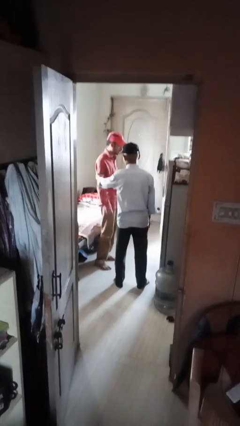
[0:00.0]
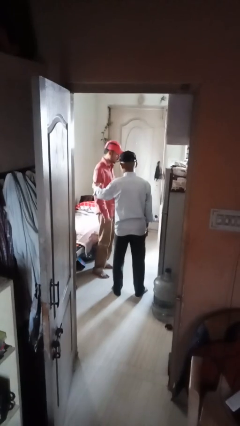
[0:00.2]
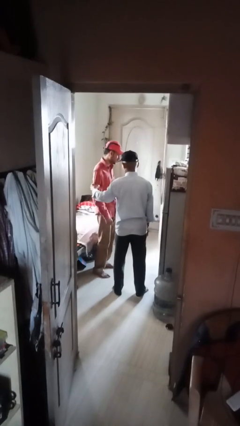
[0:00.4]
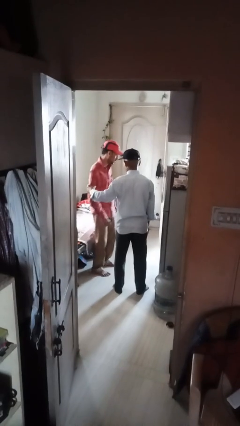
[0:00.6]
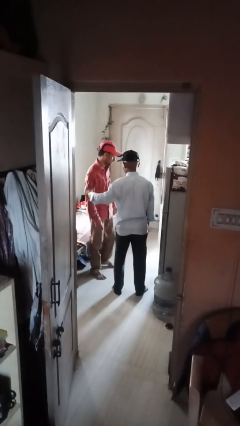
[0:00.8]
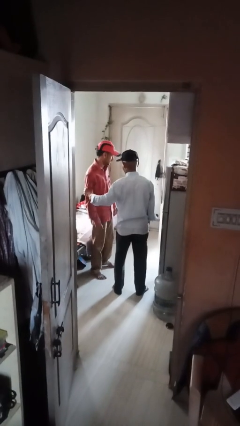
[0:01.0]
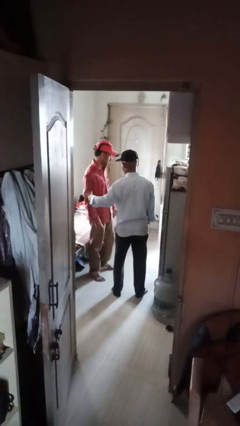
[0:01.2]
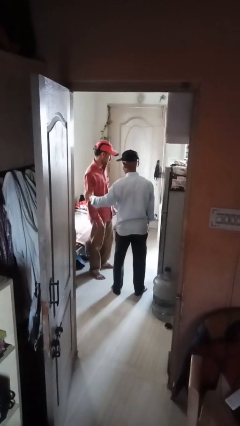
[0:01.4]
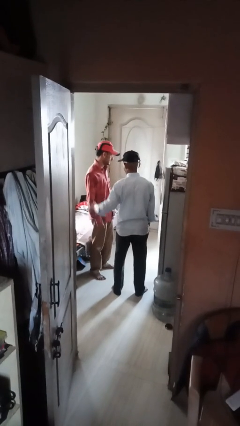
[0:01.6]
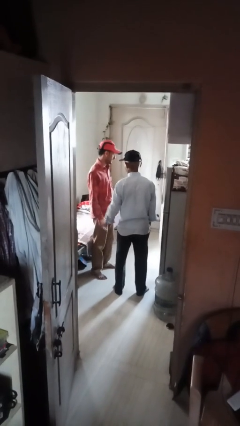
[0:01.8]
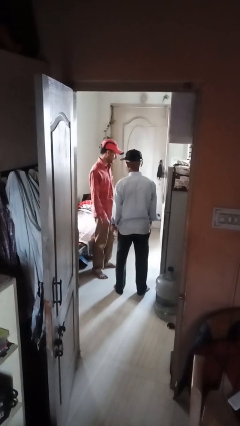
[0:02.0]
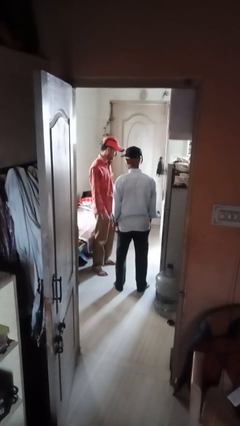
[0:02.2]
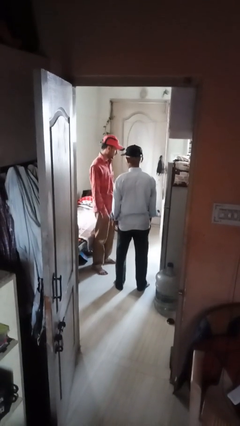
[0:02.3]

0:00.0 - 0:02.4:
person grabs person by bicep

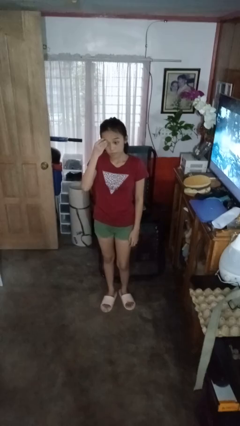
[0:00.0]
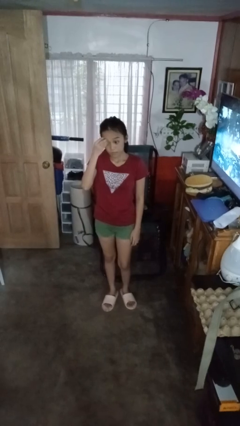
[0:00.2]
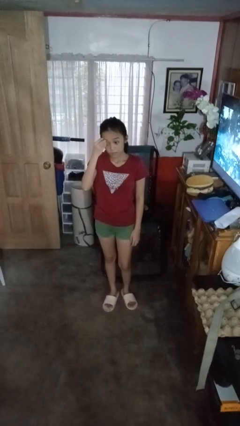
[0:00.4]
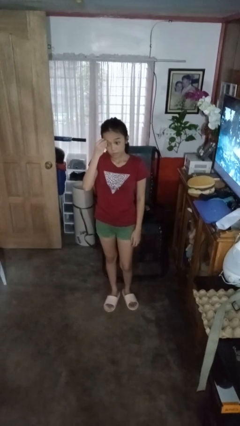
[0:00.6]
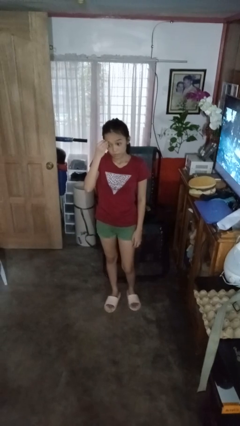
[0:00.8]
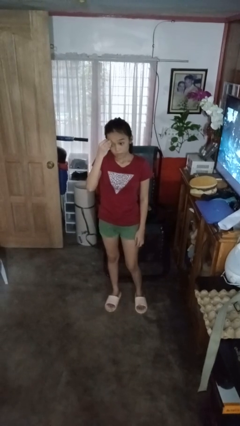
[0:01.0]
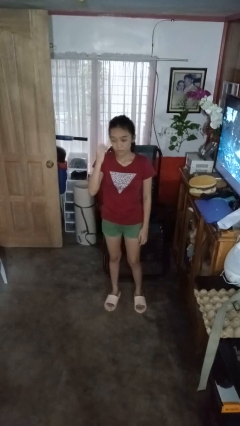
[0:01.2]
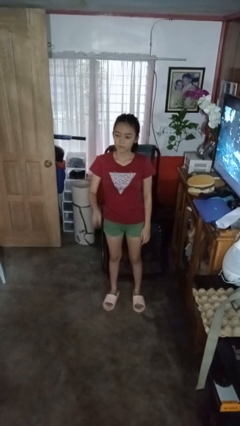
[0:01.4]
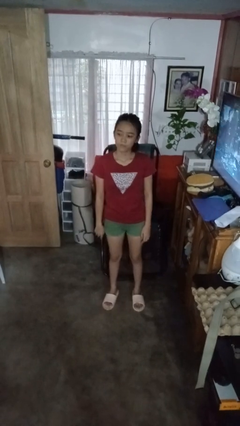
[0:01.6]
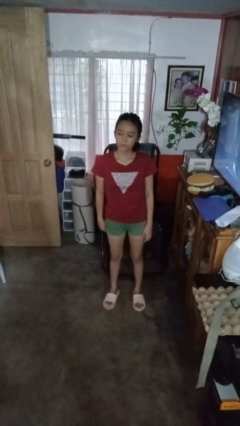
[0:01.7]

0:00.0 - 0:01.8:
person scratches face

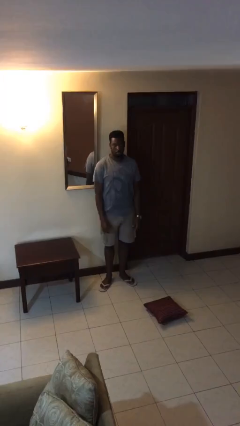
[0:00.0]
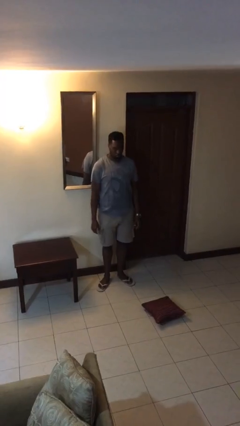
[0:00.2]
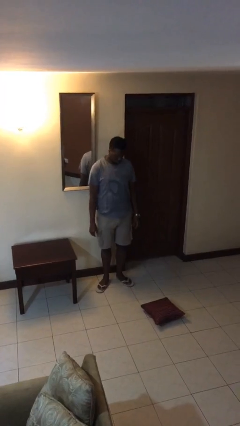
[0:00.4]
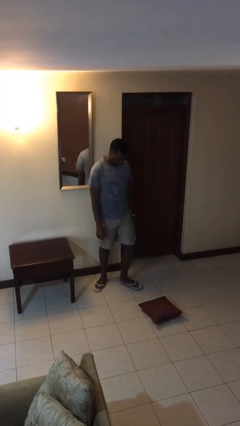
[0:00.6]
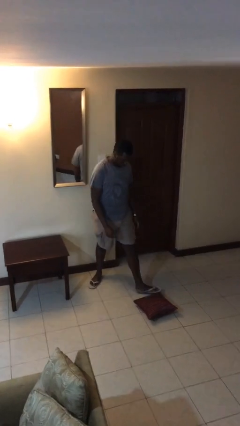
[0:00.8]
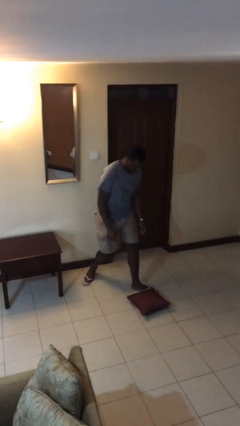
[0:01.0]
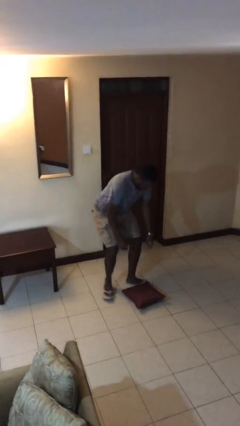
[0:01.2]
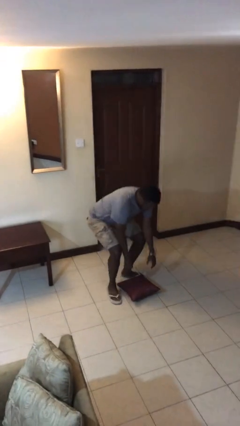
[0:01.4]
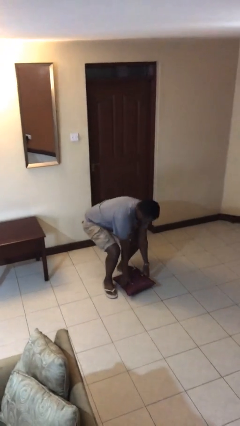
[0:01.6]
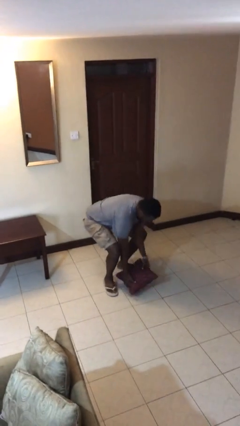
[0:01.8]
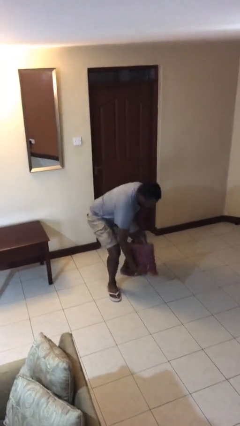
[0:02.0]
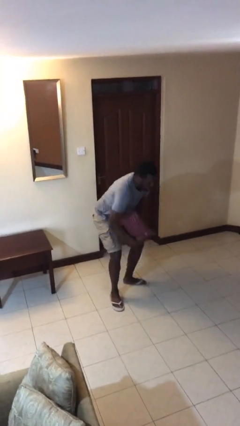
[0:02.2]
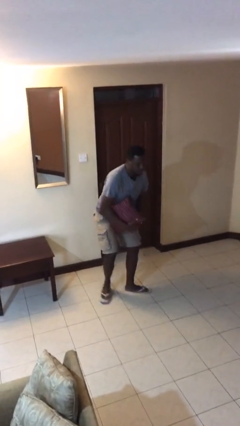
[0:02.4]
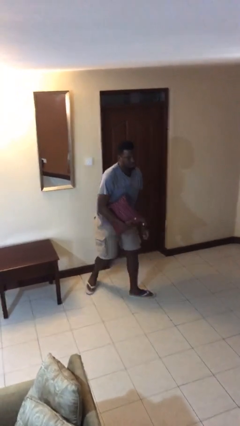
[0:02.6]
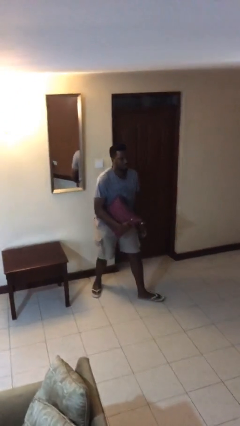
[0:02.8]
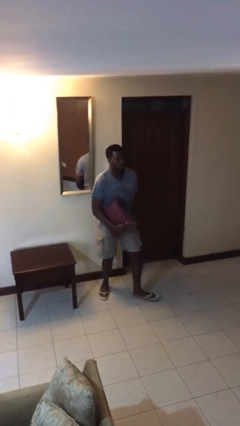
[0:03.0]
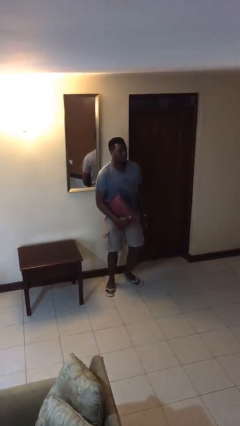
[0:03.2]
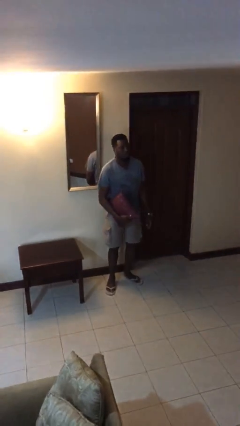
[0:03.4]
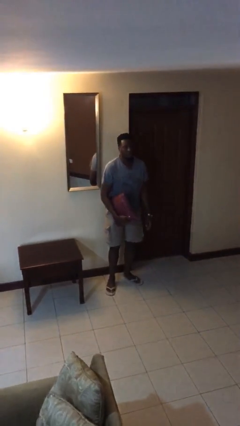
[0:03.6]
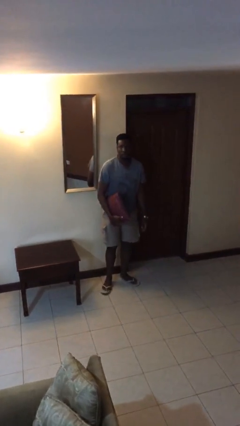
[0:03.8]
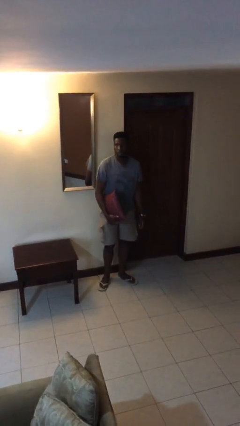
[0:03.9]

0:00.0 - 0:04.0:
person picks up object from floor

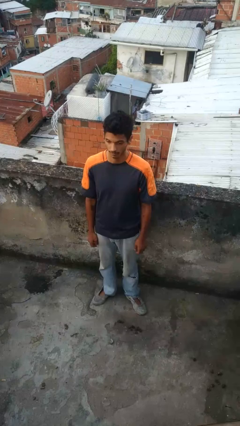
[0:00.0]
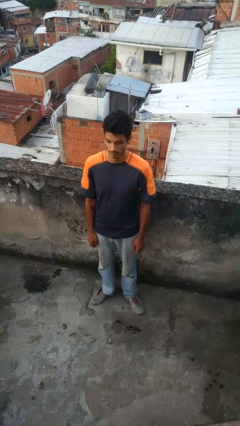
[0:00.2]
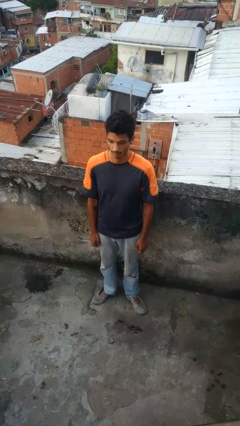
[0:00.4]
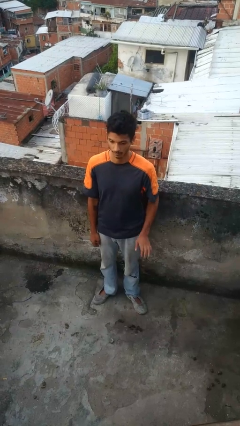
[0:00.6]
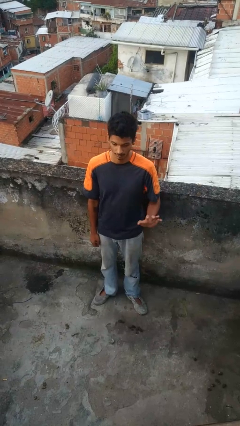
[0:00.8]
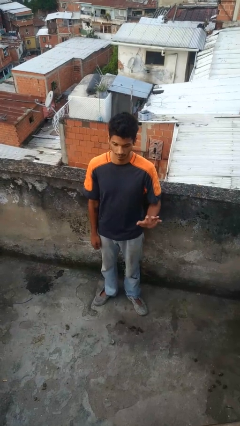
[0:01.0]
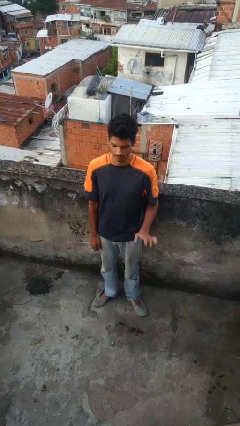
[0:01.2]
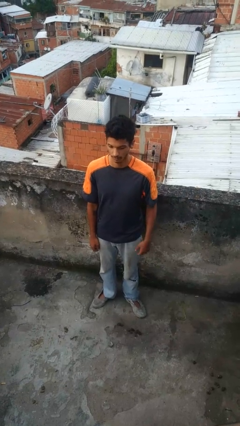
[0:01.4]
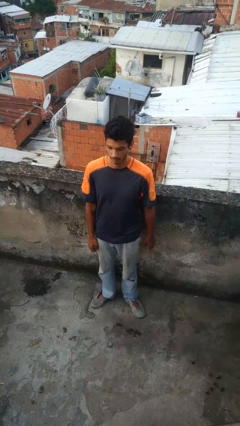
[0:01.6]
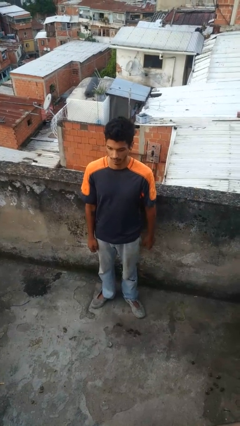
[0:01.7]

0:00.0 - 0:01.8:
person gestures number five

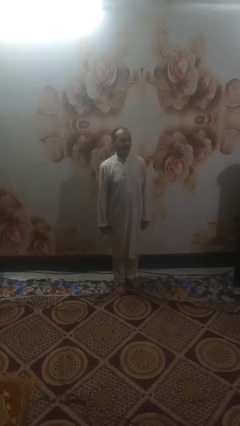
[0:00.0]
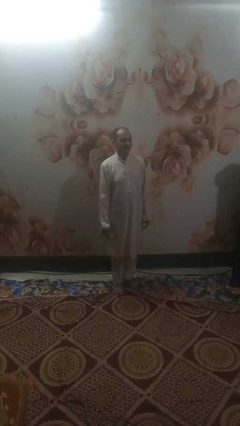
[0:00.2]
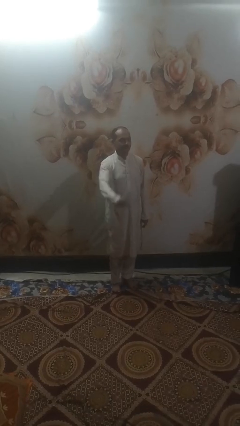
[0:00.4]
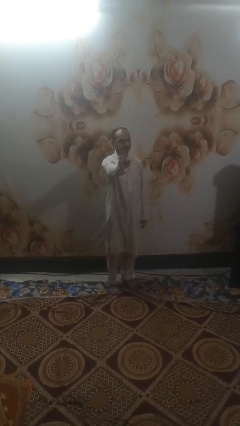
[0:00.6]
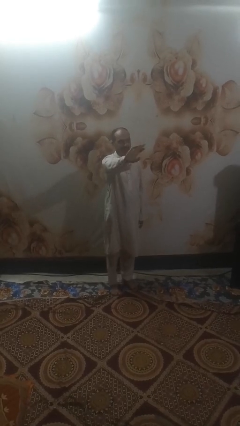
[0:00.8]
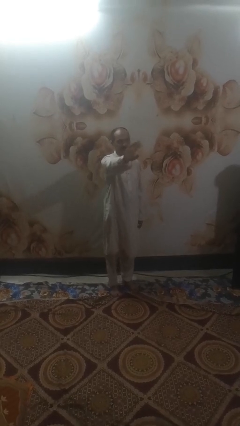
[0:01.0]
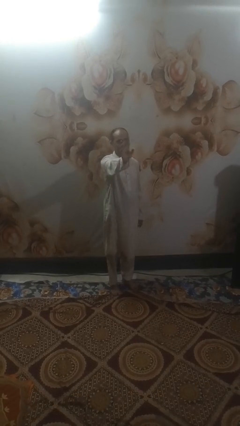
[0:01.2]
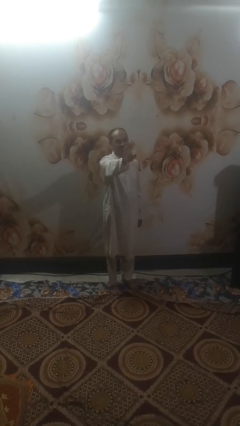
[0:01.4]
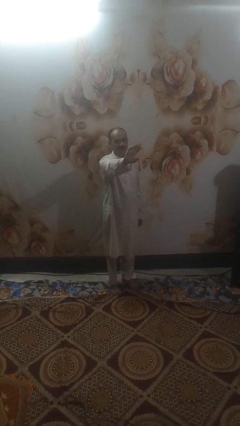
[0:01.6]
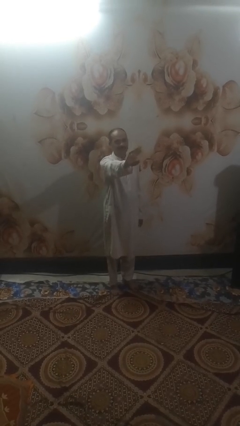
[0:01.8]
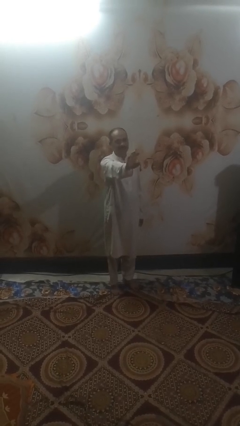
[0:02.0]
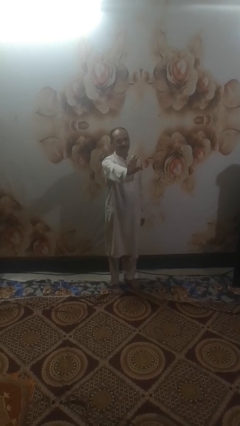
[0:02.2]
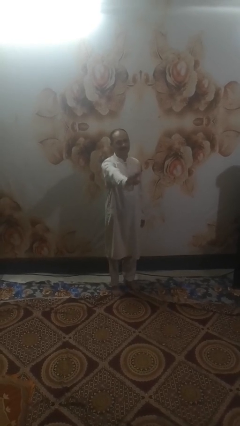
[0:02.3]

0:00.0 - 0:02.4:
person waves at person

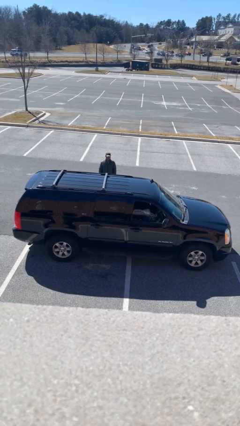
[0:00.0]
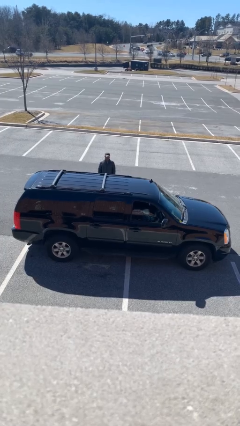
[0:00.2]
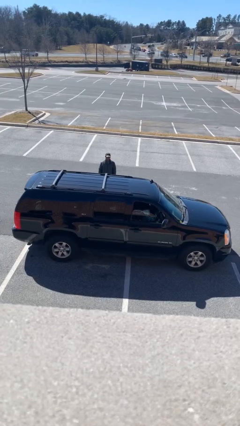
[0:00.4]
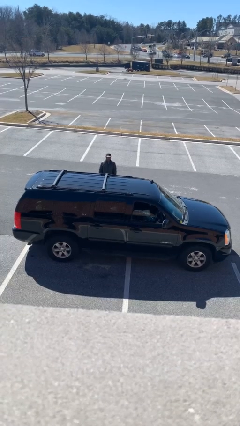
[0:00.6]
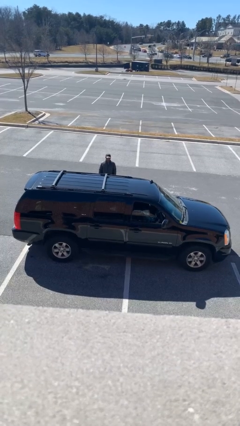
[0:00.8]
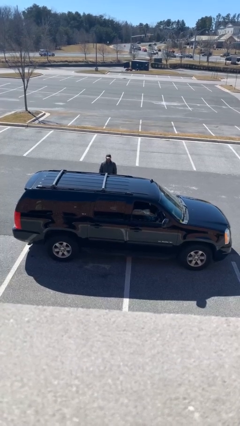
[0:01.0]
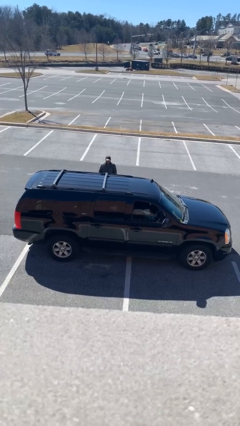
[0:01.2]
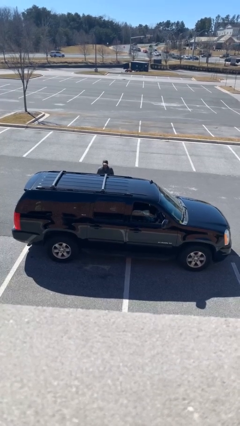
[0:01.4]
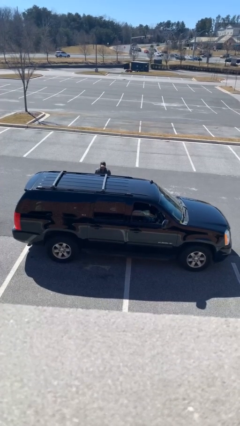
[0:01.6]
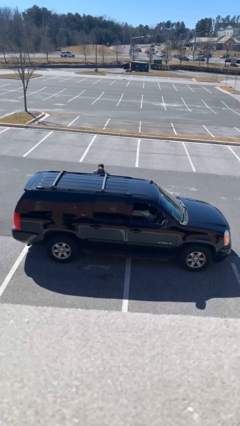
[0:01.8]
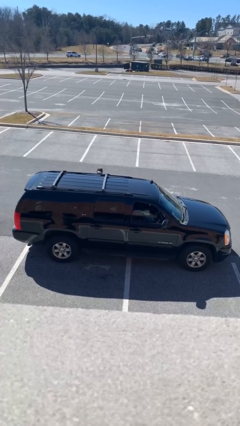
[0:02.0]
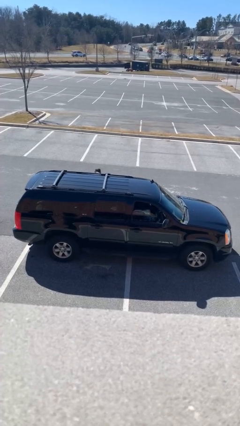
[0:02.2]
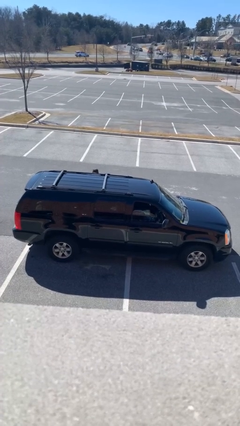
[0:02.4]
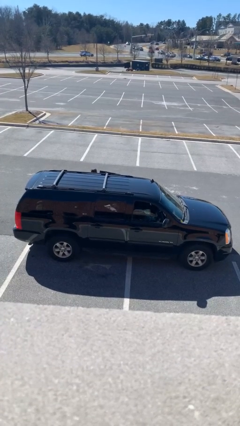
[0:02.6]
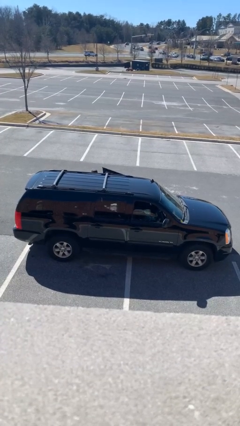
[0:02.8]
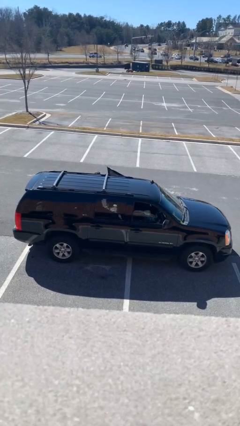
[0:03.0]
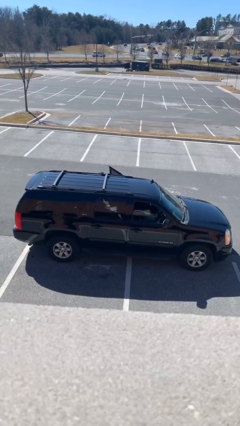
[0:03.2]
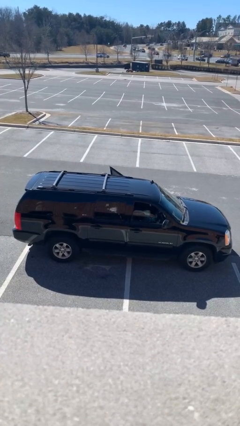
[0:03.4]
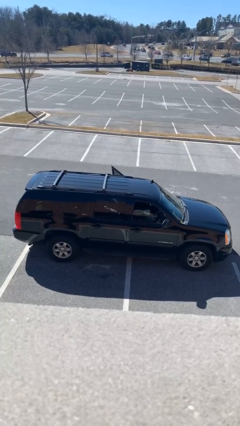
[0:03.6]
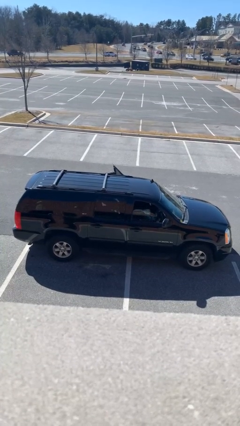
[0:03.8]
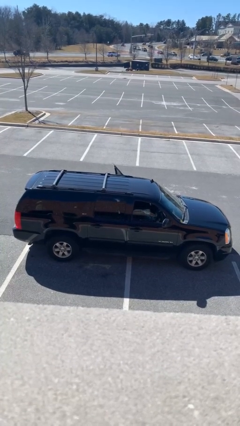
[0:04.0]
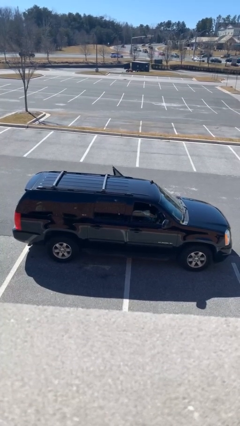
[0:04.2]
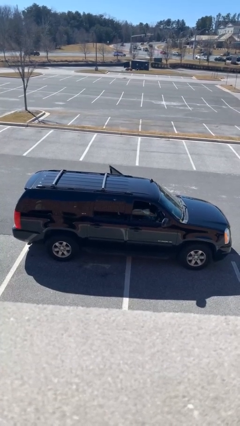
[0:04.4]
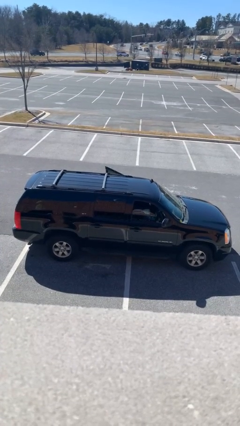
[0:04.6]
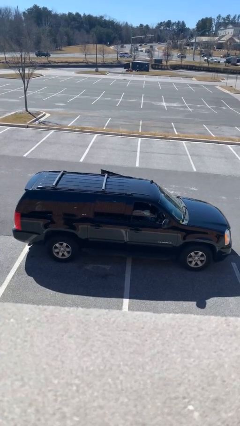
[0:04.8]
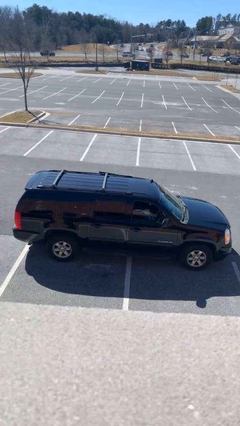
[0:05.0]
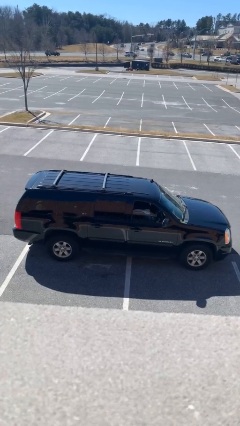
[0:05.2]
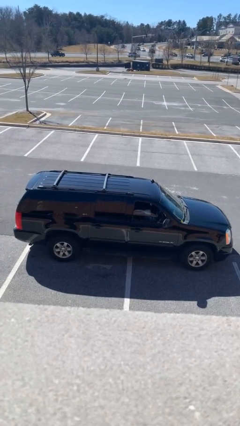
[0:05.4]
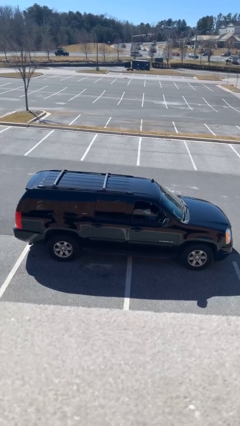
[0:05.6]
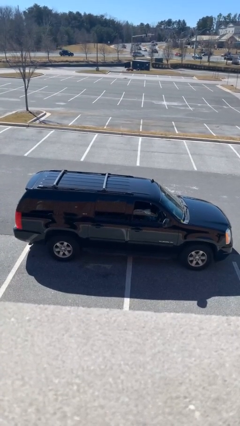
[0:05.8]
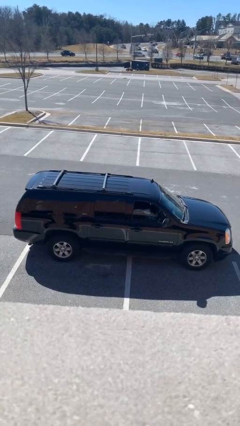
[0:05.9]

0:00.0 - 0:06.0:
car picks up person
